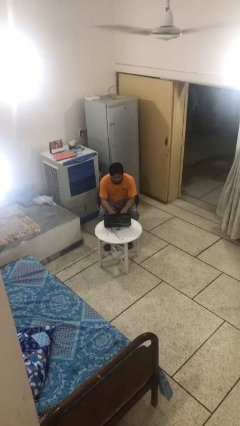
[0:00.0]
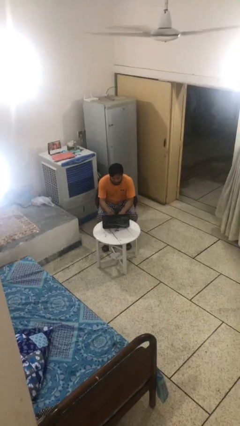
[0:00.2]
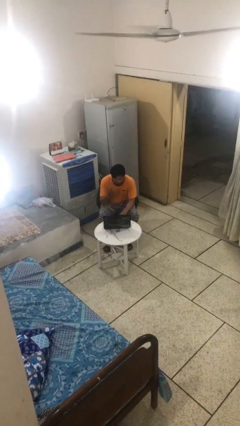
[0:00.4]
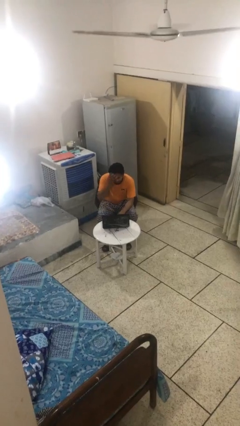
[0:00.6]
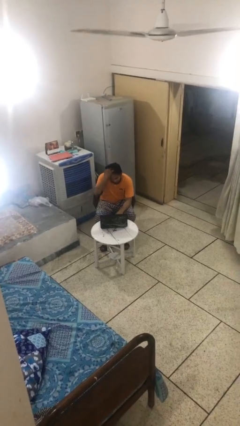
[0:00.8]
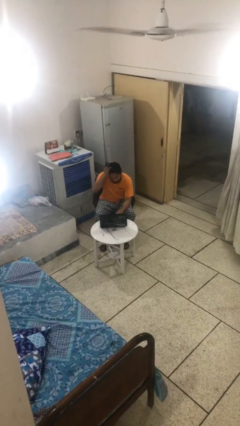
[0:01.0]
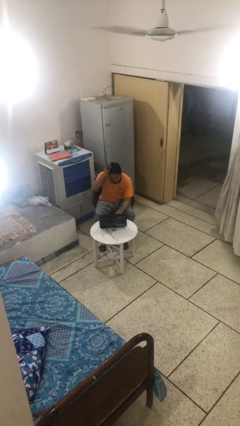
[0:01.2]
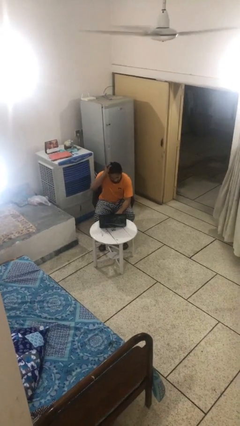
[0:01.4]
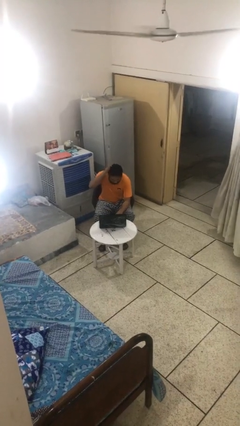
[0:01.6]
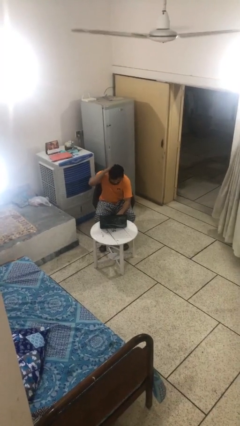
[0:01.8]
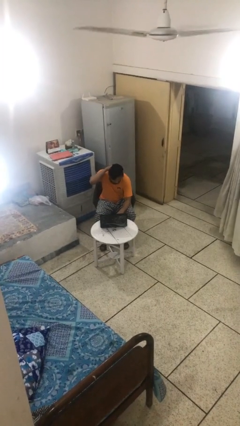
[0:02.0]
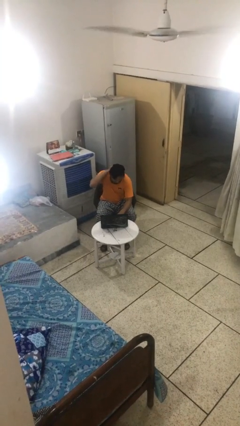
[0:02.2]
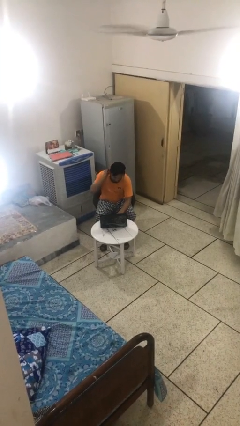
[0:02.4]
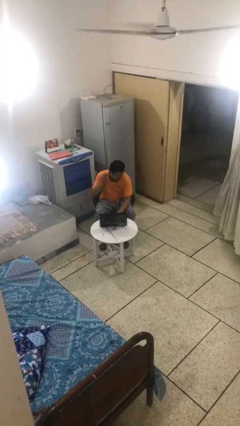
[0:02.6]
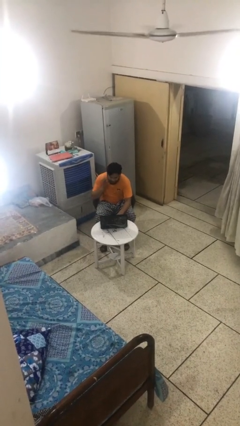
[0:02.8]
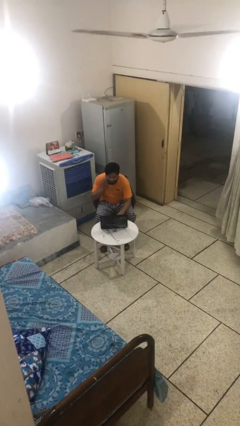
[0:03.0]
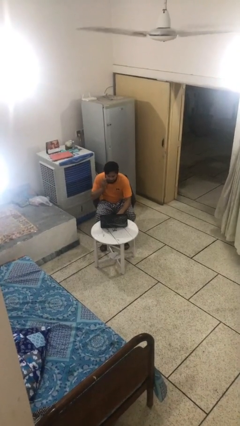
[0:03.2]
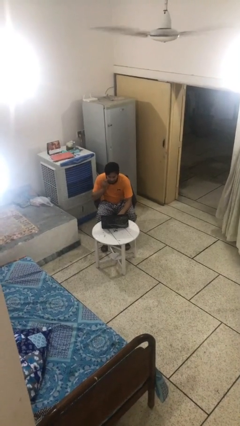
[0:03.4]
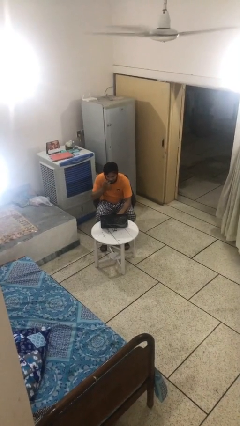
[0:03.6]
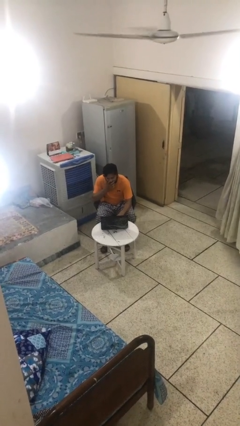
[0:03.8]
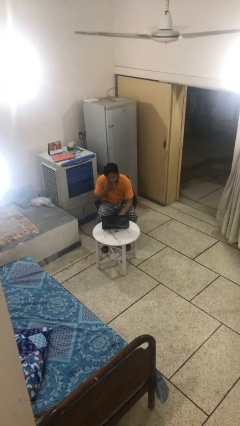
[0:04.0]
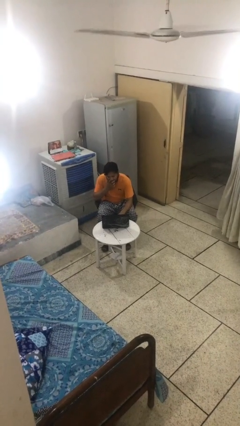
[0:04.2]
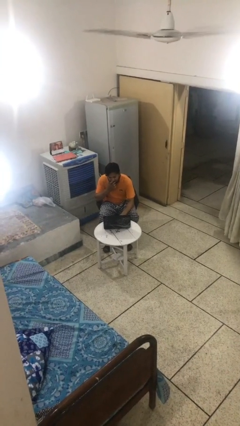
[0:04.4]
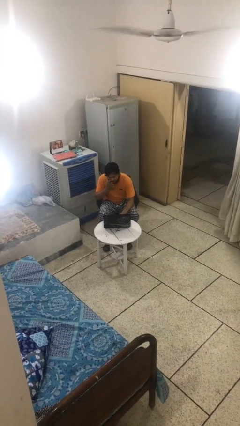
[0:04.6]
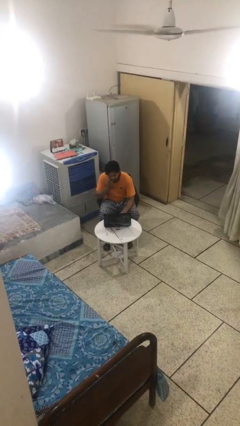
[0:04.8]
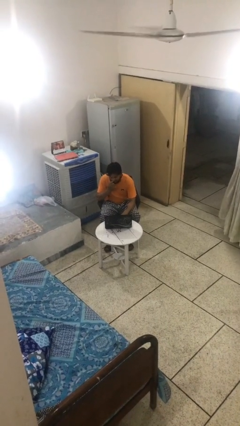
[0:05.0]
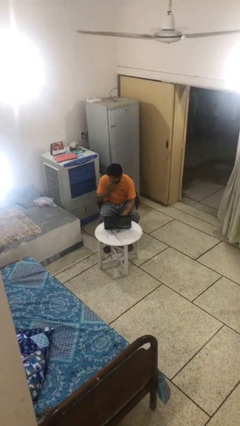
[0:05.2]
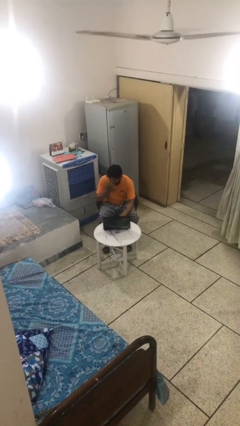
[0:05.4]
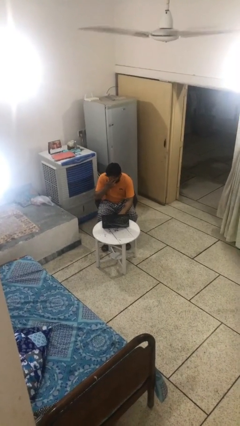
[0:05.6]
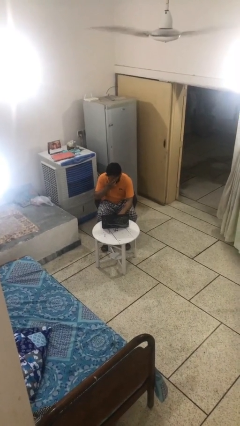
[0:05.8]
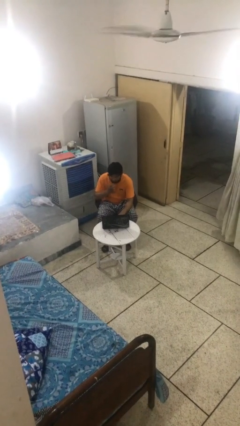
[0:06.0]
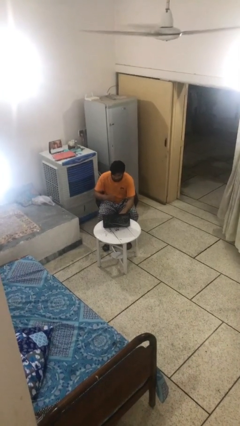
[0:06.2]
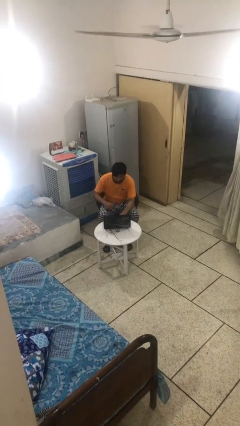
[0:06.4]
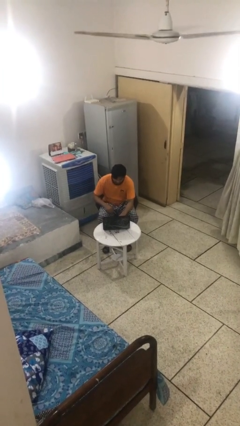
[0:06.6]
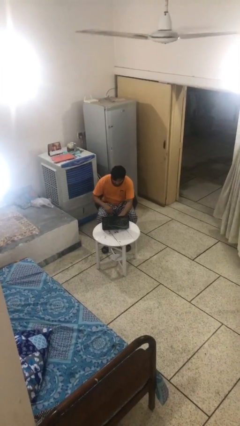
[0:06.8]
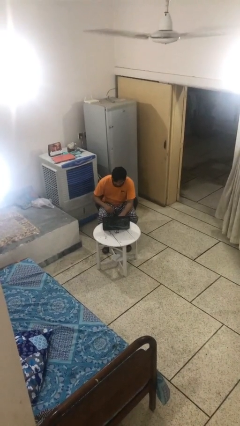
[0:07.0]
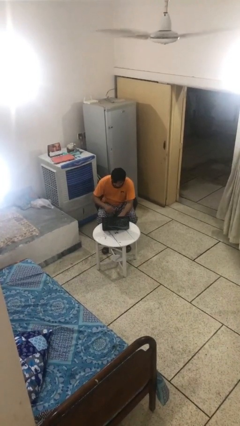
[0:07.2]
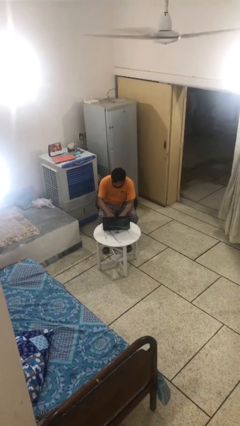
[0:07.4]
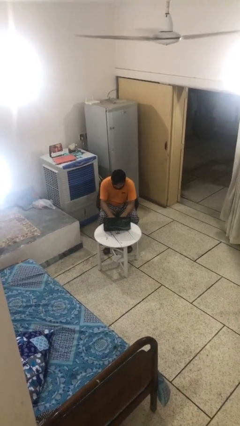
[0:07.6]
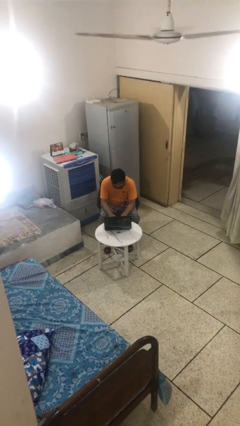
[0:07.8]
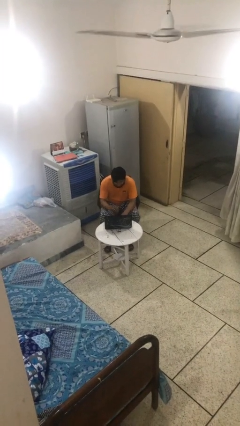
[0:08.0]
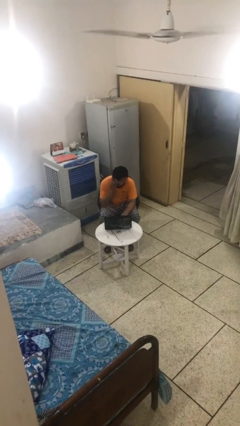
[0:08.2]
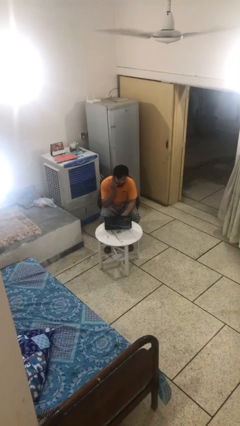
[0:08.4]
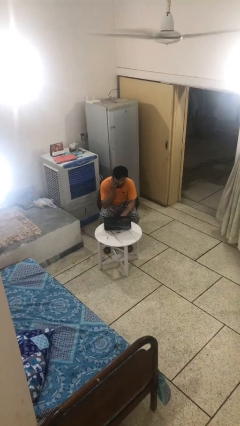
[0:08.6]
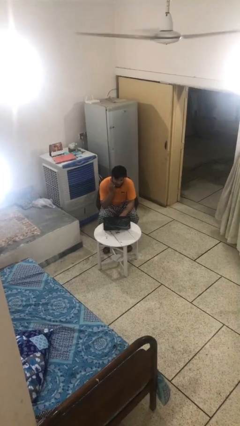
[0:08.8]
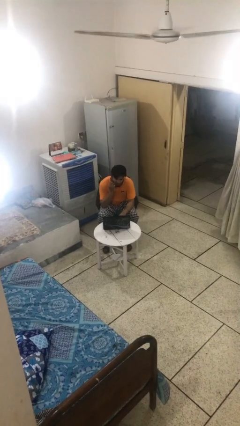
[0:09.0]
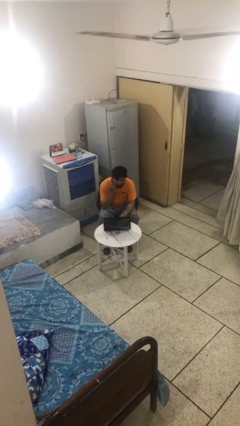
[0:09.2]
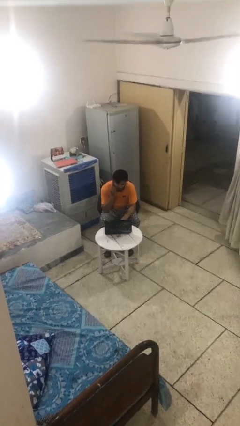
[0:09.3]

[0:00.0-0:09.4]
person interacts with laptop

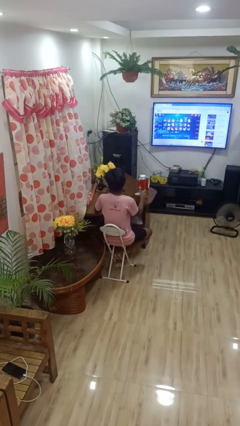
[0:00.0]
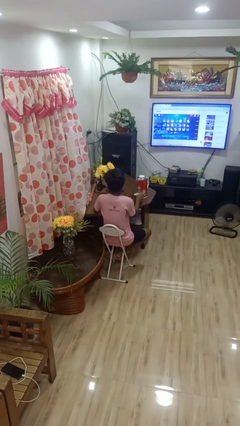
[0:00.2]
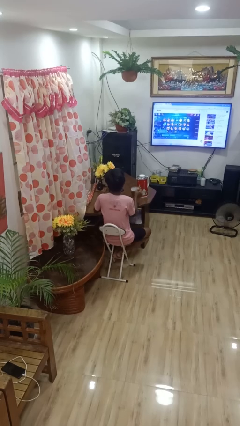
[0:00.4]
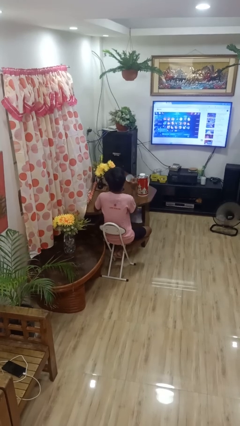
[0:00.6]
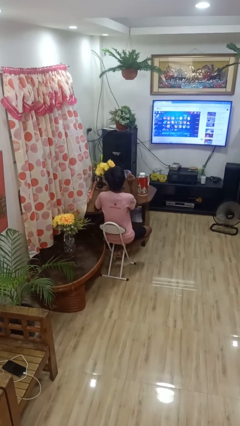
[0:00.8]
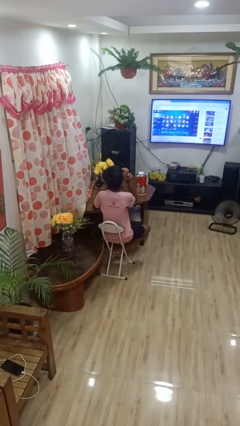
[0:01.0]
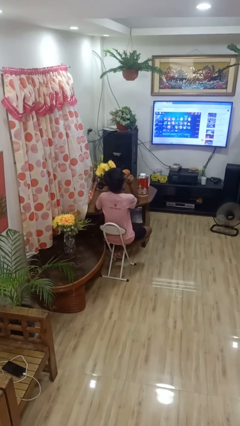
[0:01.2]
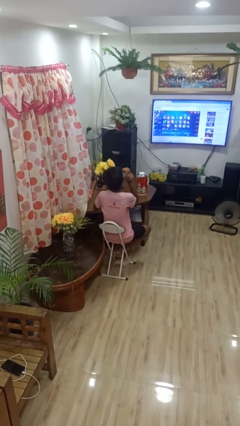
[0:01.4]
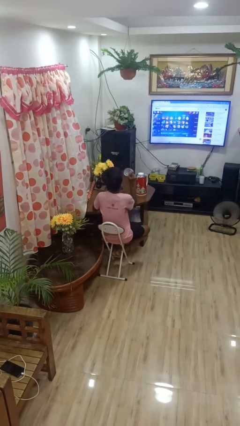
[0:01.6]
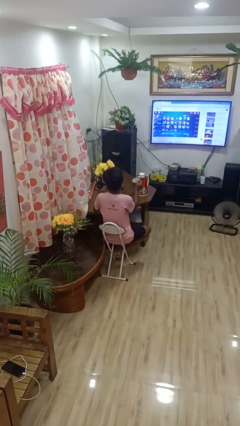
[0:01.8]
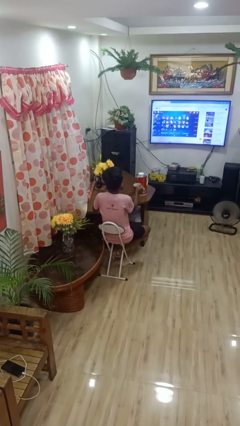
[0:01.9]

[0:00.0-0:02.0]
person drinks from mug

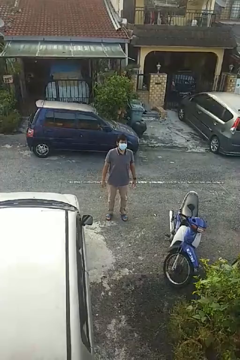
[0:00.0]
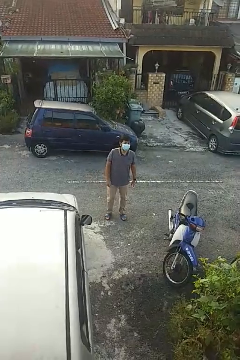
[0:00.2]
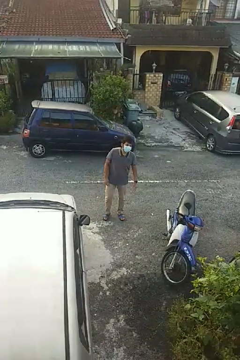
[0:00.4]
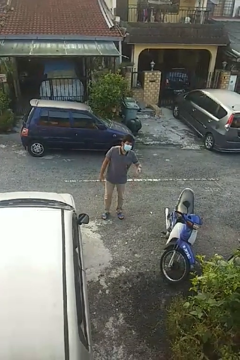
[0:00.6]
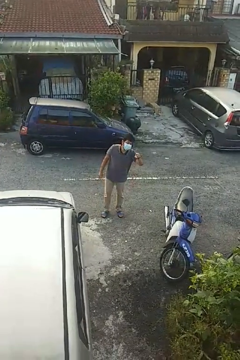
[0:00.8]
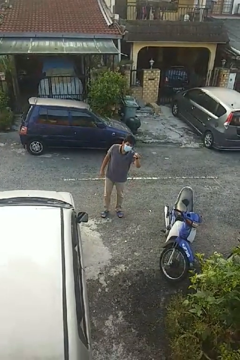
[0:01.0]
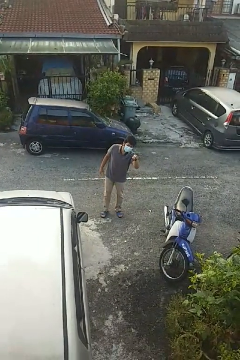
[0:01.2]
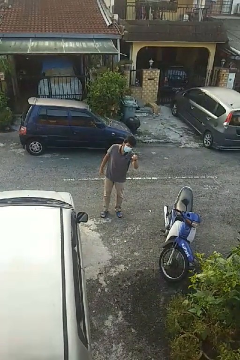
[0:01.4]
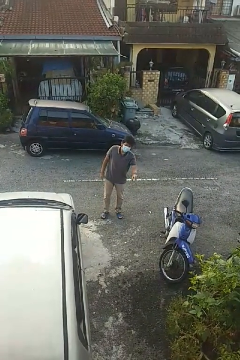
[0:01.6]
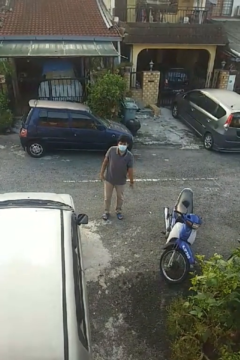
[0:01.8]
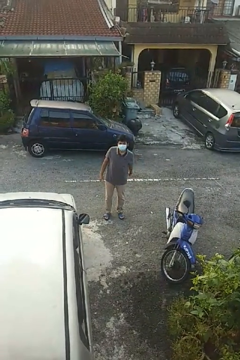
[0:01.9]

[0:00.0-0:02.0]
person points at person

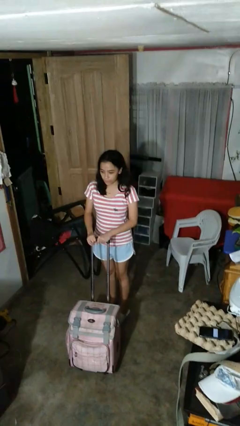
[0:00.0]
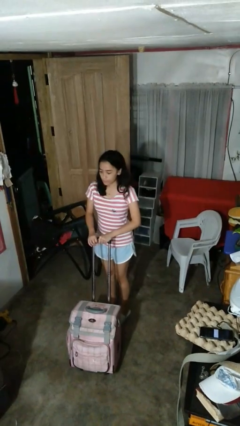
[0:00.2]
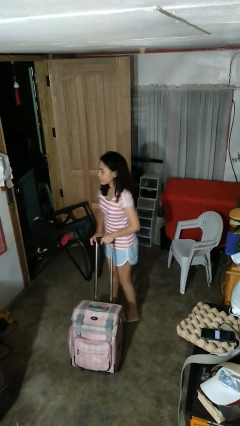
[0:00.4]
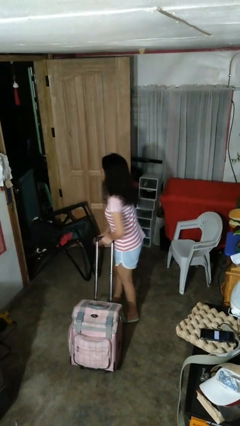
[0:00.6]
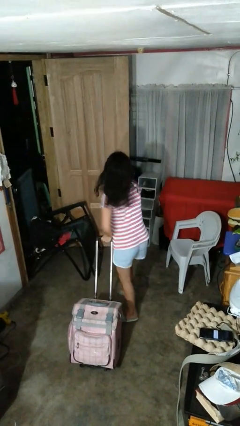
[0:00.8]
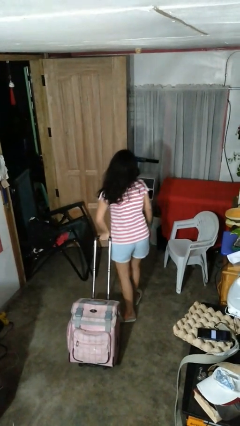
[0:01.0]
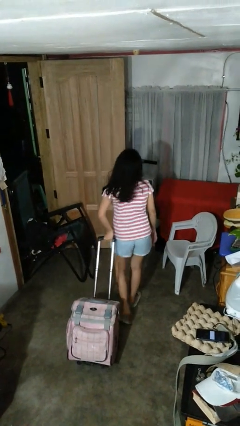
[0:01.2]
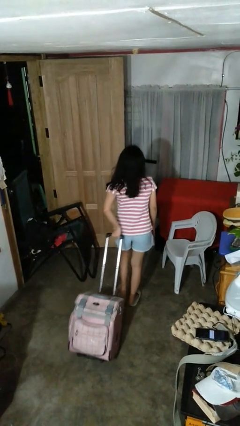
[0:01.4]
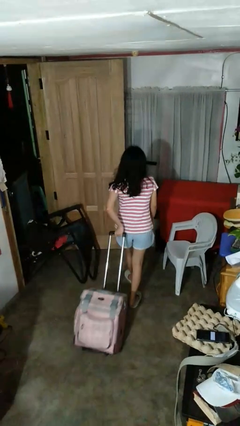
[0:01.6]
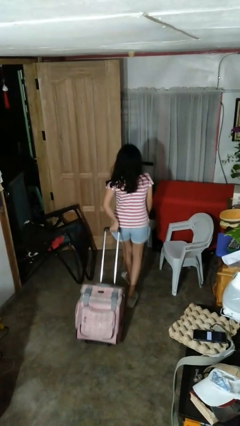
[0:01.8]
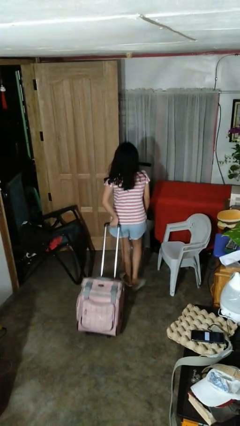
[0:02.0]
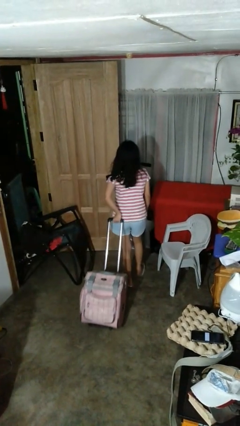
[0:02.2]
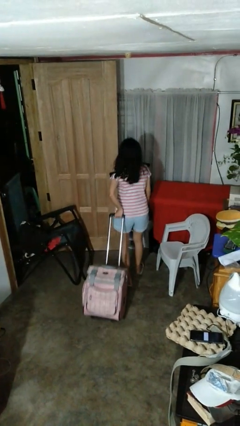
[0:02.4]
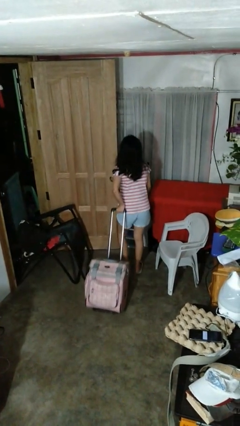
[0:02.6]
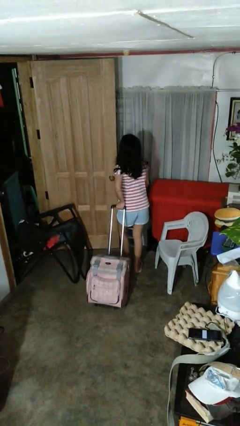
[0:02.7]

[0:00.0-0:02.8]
person pulls wheeled cart

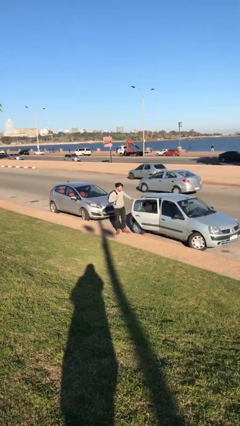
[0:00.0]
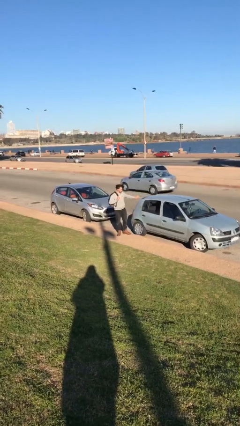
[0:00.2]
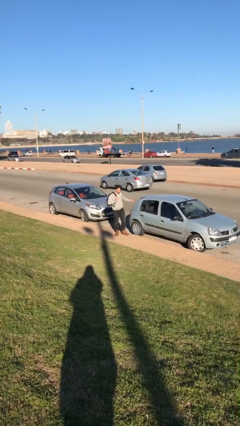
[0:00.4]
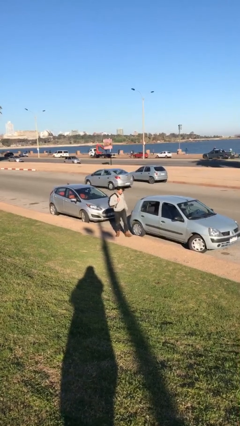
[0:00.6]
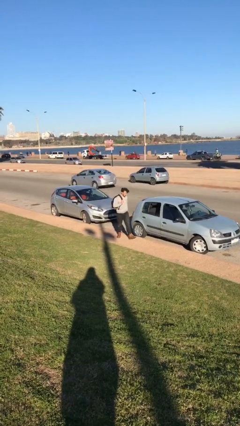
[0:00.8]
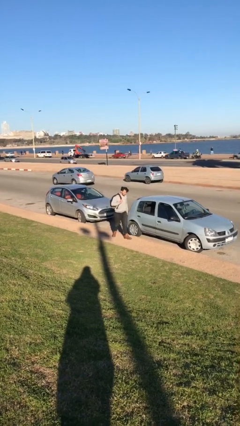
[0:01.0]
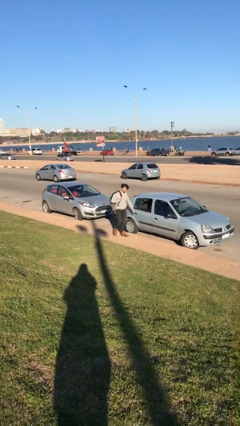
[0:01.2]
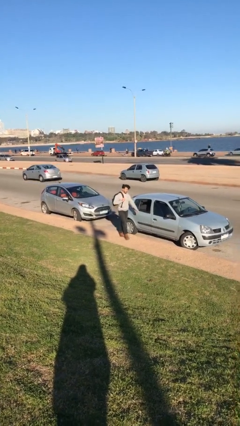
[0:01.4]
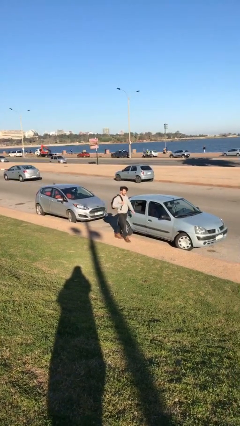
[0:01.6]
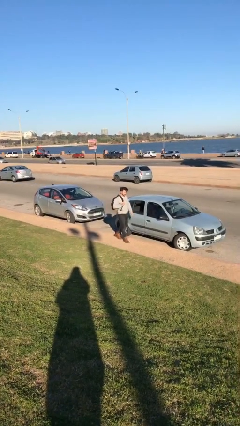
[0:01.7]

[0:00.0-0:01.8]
person closes car door

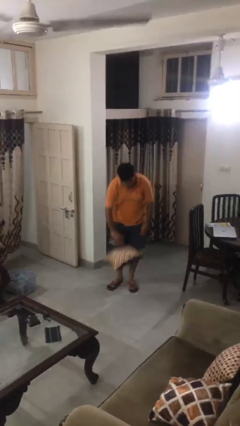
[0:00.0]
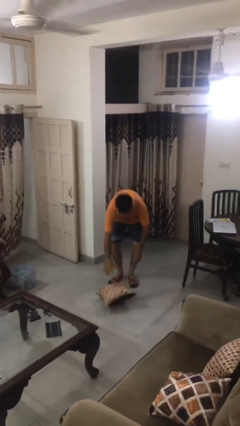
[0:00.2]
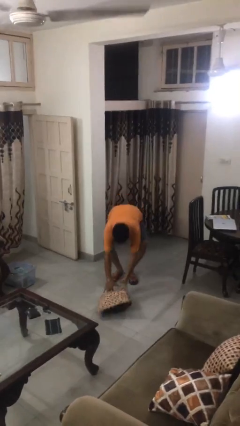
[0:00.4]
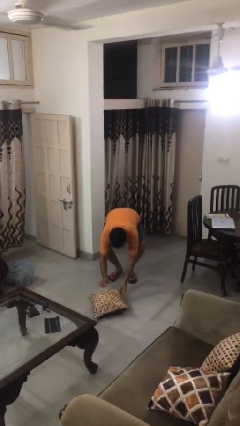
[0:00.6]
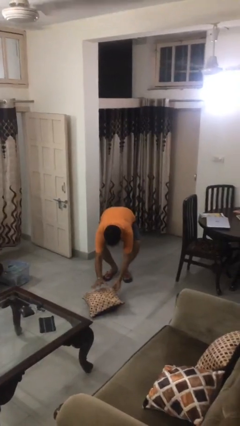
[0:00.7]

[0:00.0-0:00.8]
person drops object
